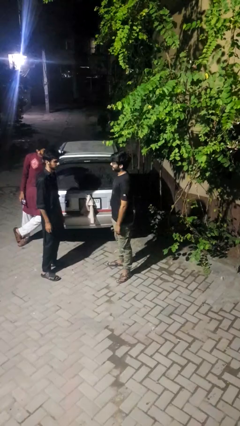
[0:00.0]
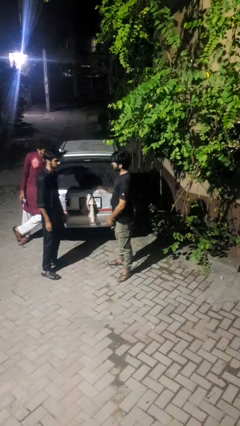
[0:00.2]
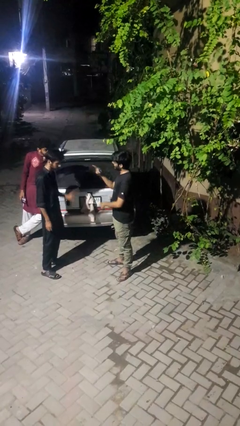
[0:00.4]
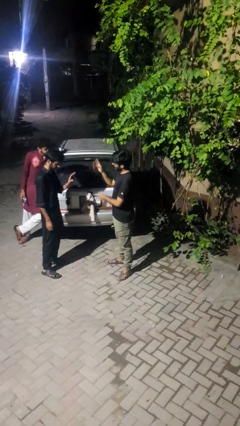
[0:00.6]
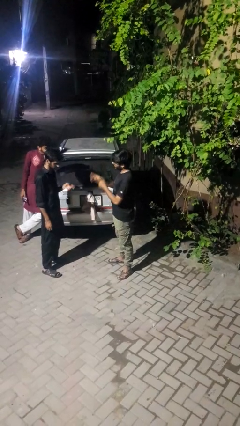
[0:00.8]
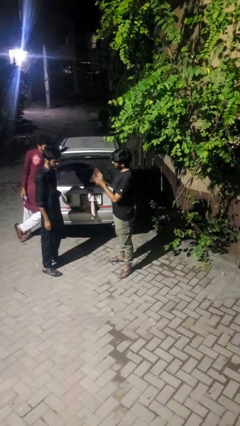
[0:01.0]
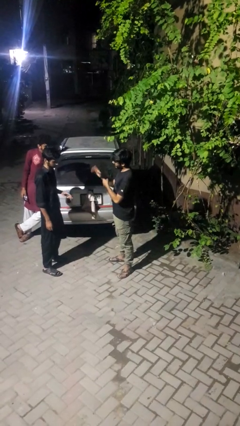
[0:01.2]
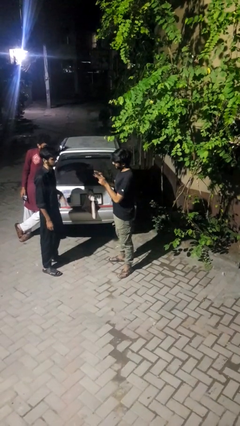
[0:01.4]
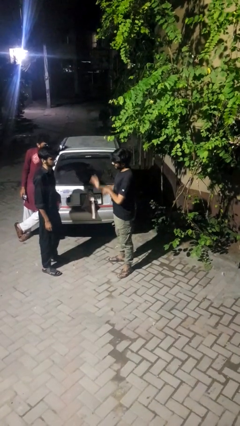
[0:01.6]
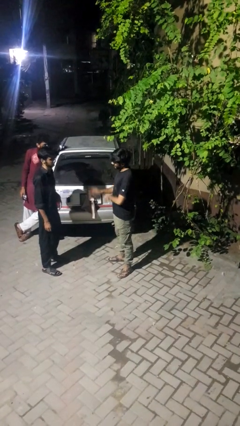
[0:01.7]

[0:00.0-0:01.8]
person talks to person

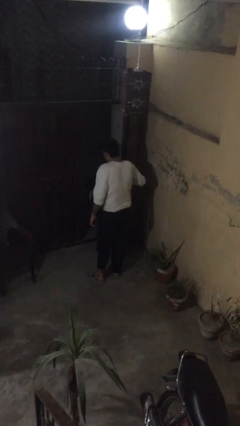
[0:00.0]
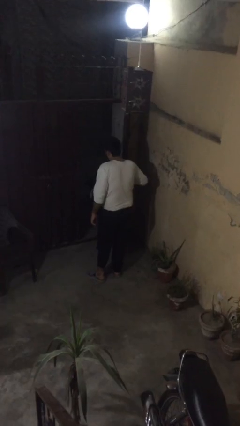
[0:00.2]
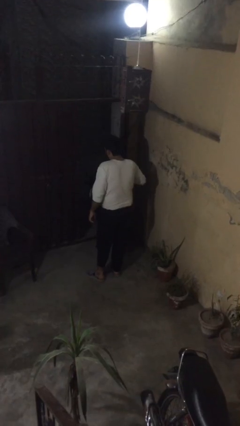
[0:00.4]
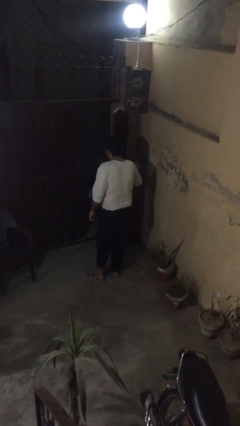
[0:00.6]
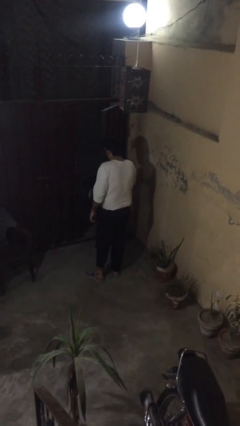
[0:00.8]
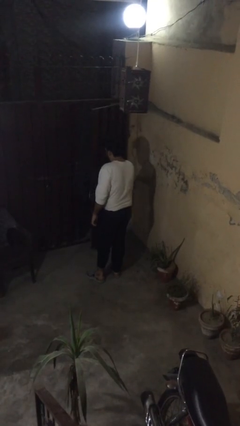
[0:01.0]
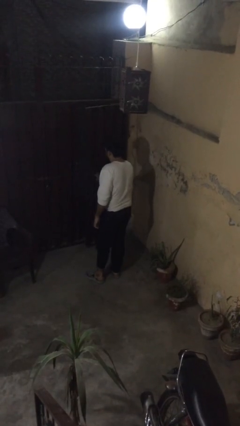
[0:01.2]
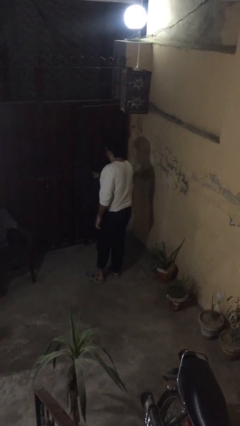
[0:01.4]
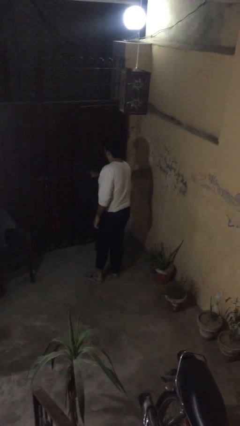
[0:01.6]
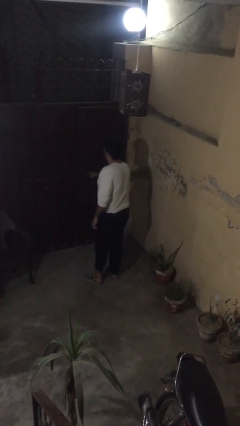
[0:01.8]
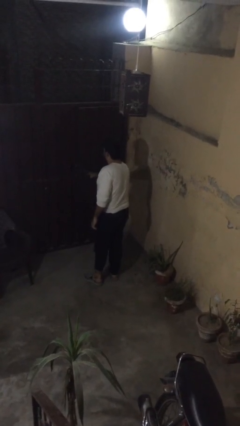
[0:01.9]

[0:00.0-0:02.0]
person closes facility door

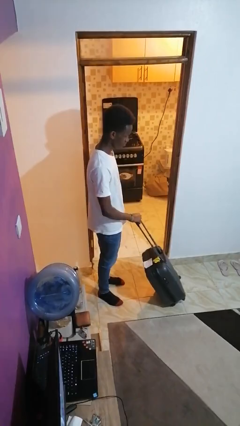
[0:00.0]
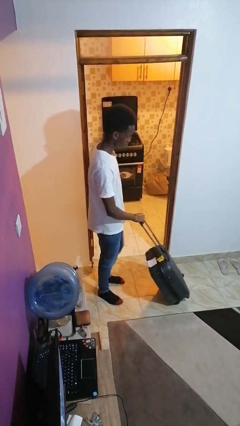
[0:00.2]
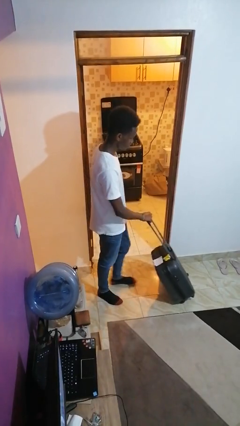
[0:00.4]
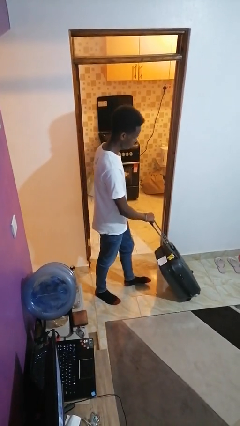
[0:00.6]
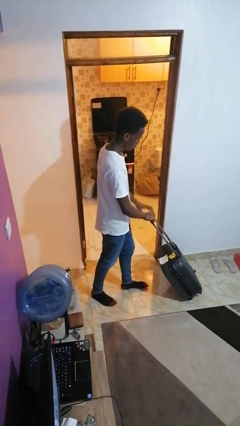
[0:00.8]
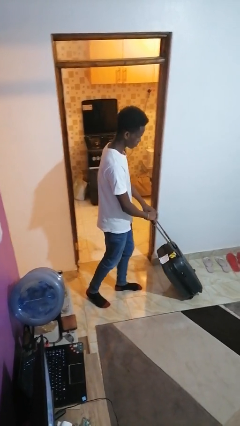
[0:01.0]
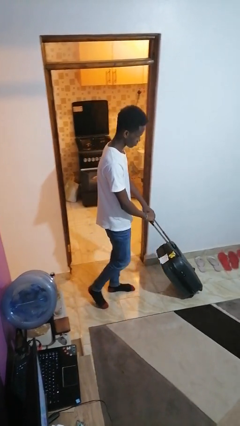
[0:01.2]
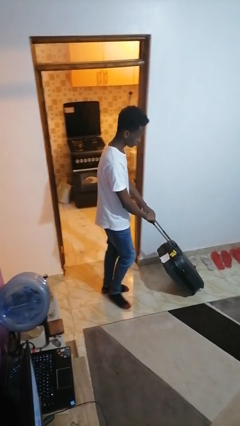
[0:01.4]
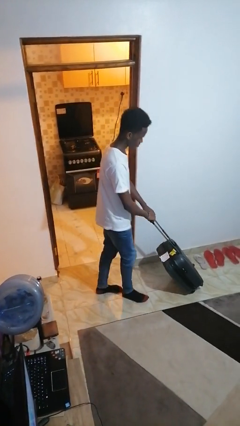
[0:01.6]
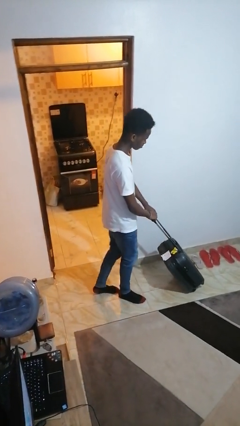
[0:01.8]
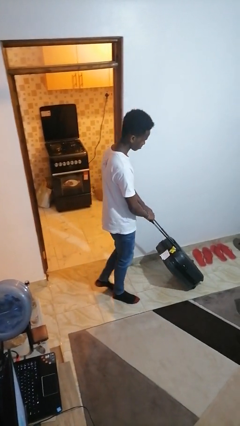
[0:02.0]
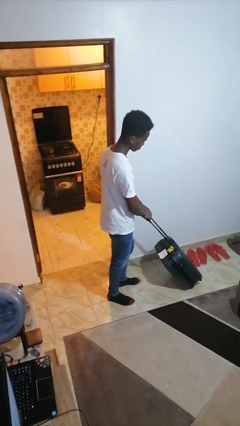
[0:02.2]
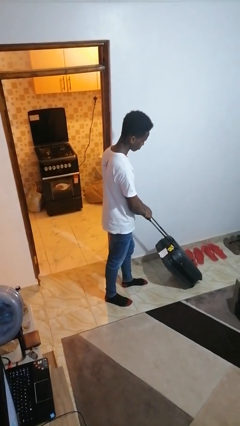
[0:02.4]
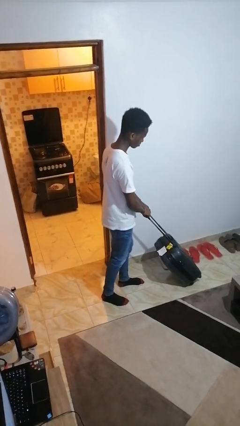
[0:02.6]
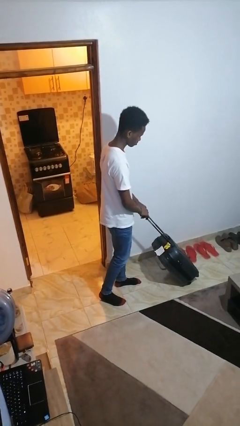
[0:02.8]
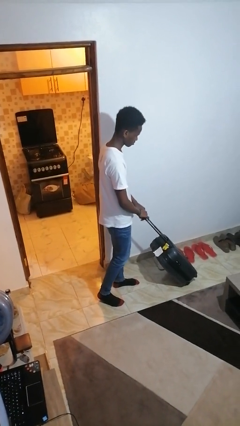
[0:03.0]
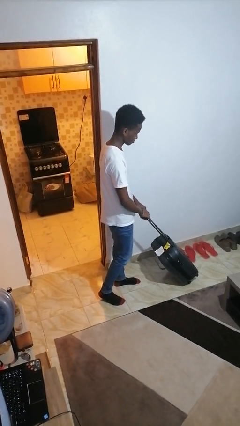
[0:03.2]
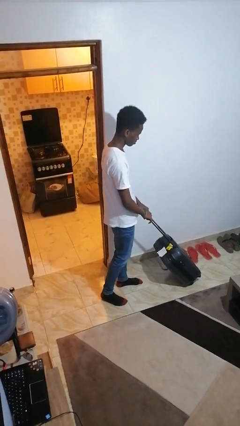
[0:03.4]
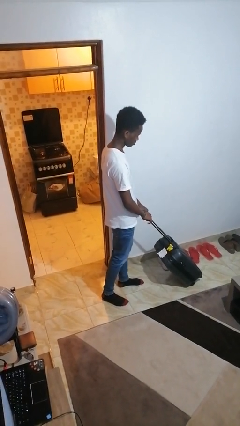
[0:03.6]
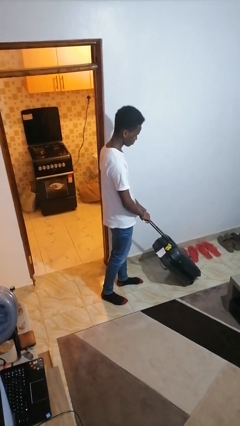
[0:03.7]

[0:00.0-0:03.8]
person pushes wheeled cart

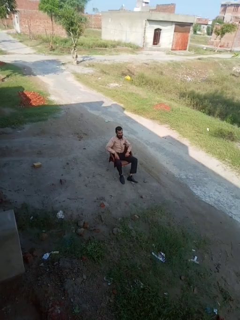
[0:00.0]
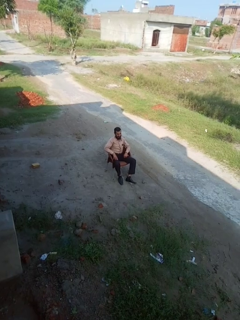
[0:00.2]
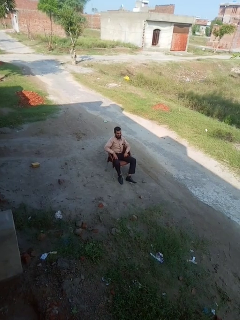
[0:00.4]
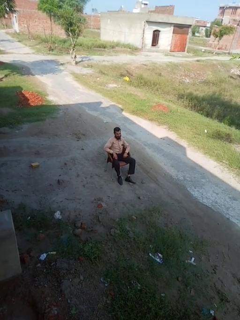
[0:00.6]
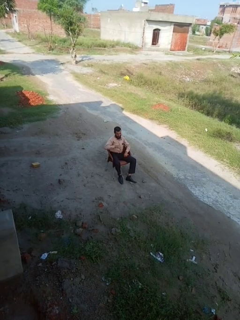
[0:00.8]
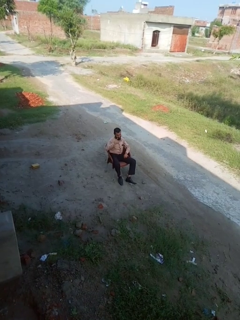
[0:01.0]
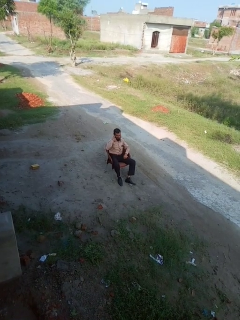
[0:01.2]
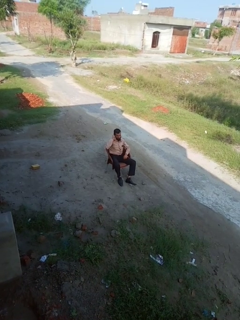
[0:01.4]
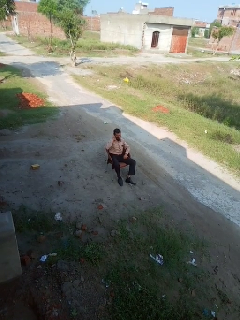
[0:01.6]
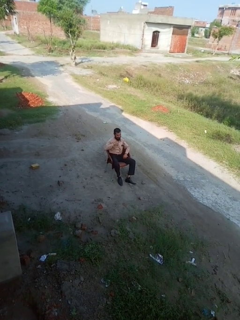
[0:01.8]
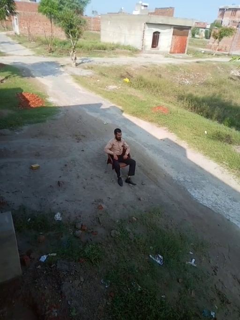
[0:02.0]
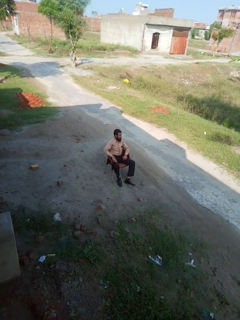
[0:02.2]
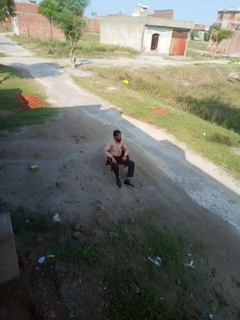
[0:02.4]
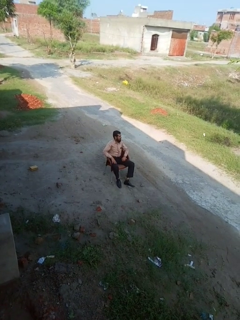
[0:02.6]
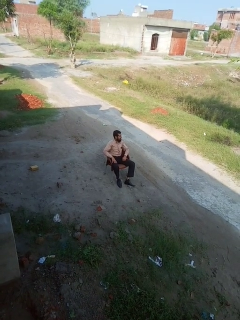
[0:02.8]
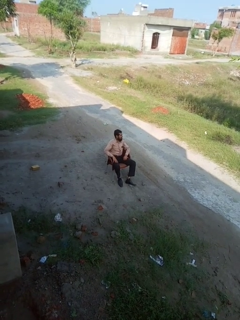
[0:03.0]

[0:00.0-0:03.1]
person gestures call me

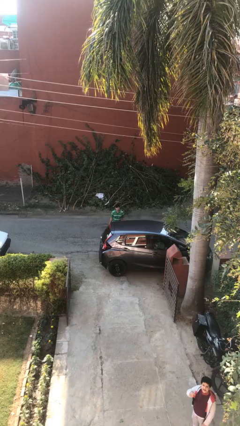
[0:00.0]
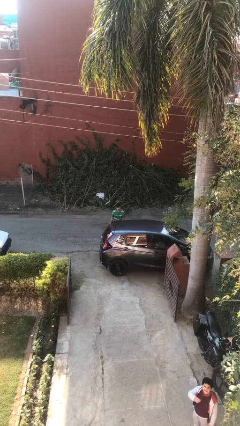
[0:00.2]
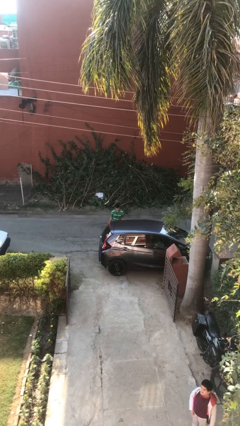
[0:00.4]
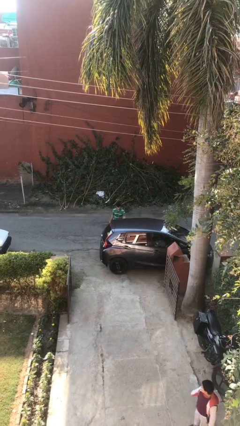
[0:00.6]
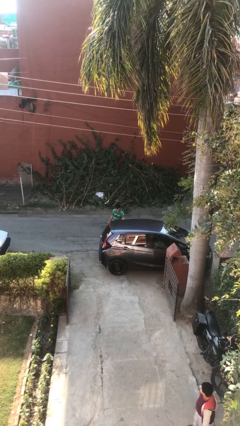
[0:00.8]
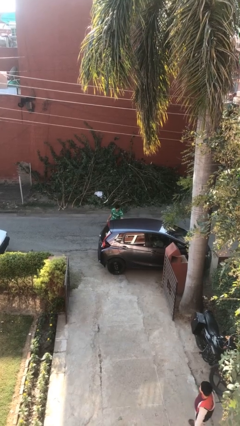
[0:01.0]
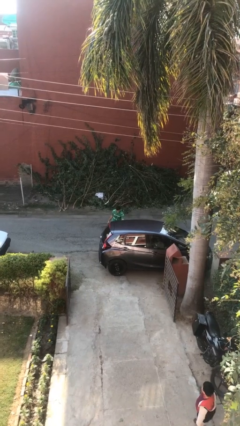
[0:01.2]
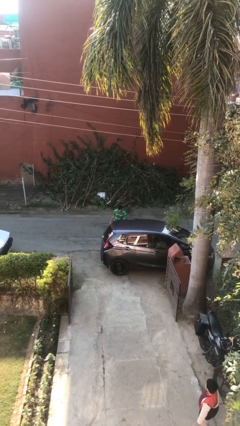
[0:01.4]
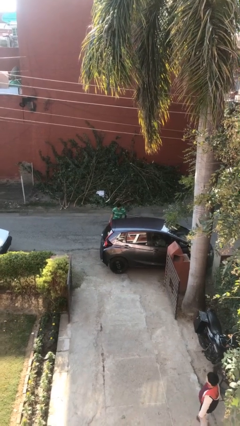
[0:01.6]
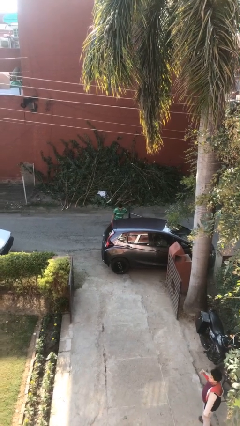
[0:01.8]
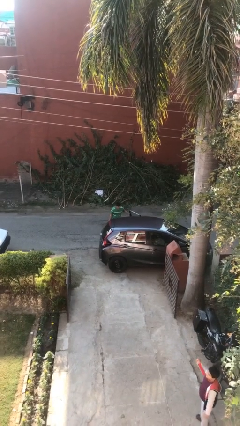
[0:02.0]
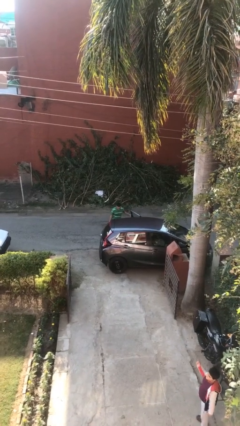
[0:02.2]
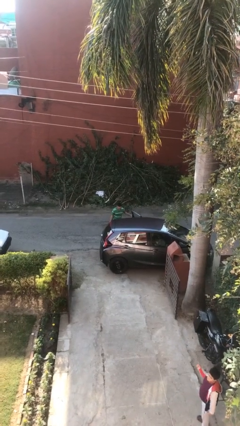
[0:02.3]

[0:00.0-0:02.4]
person opens car door

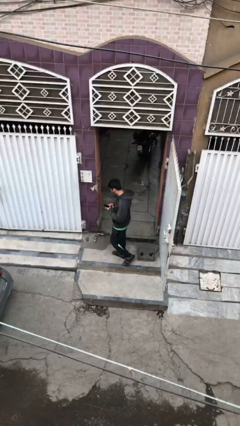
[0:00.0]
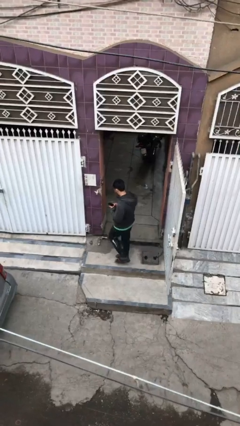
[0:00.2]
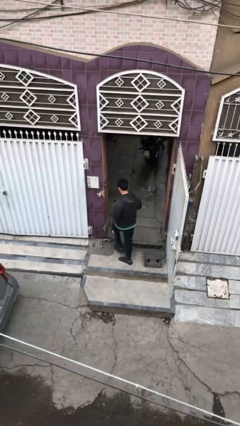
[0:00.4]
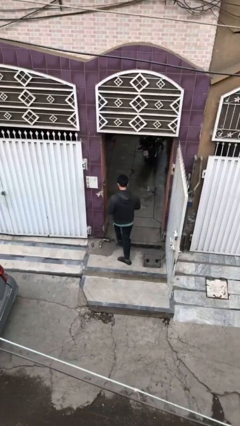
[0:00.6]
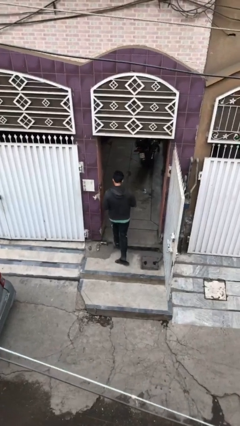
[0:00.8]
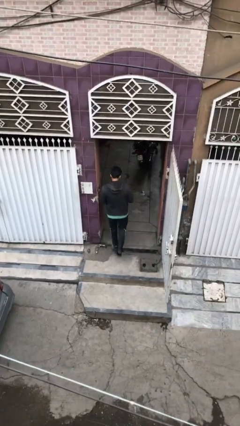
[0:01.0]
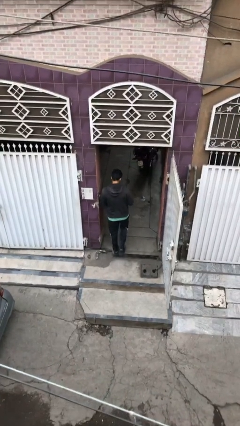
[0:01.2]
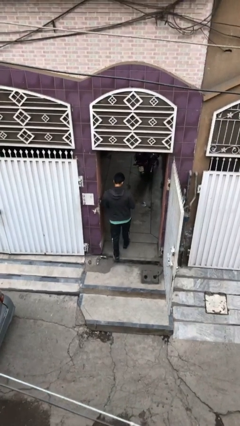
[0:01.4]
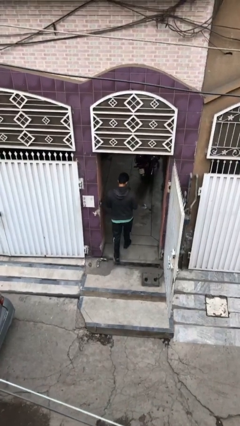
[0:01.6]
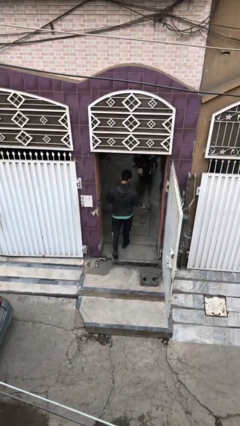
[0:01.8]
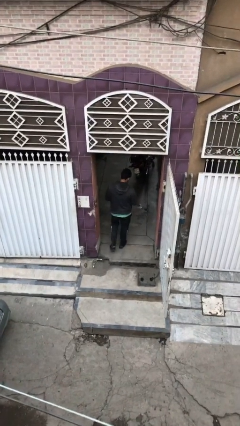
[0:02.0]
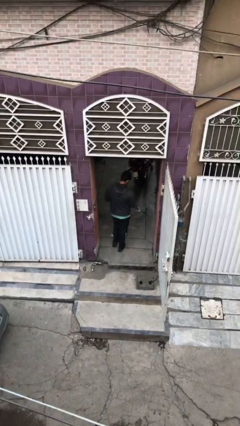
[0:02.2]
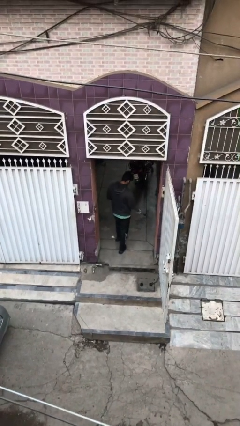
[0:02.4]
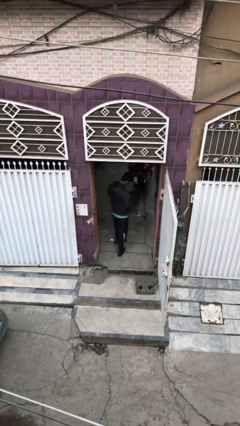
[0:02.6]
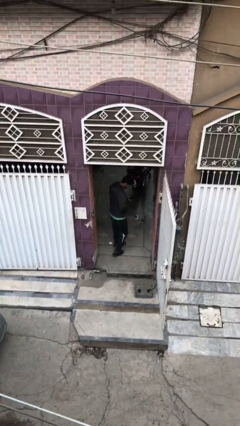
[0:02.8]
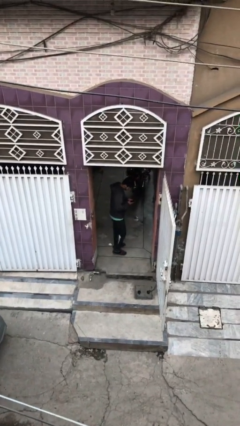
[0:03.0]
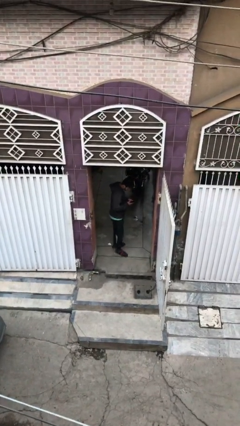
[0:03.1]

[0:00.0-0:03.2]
person exits scene through structure

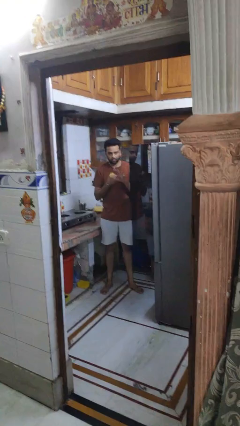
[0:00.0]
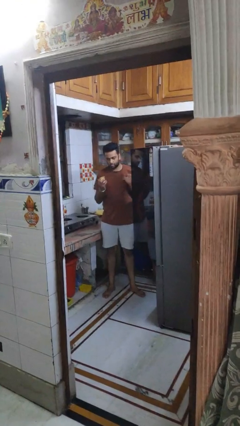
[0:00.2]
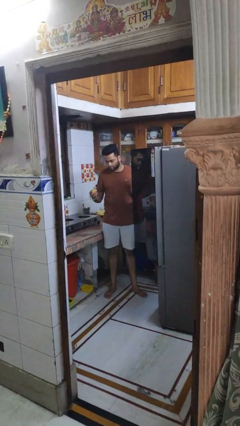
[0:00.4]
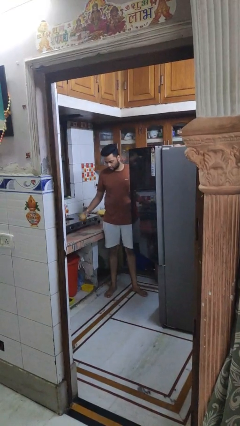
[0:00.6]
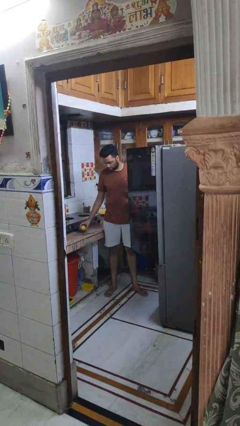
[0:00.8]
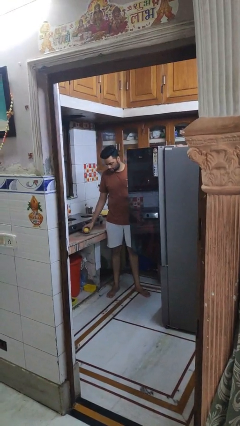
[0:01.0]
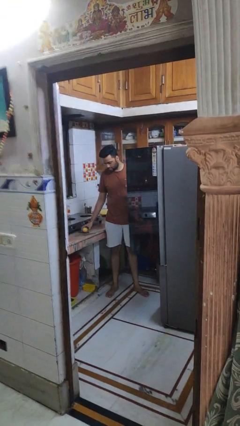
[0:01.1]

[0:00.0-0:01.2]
person takes object from refrigerator

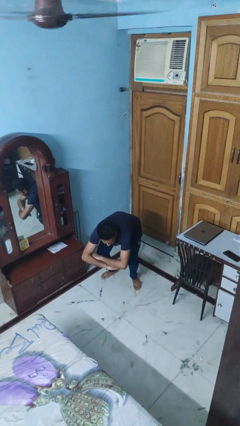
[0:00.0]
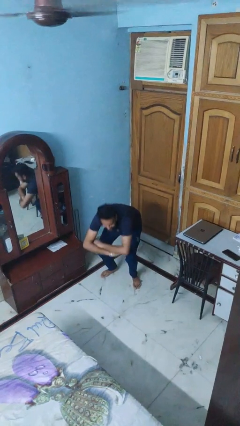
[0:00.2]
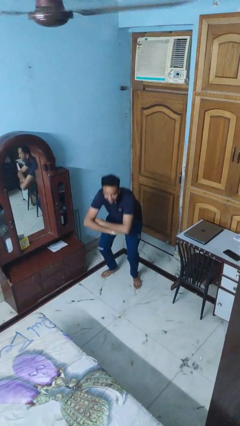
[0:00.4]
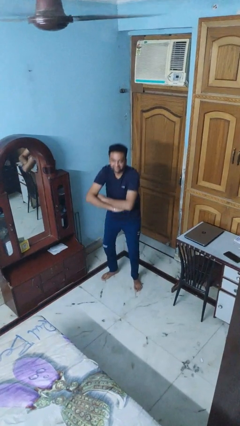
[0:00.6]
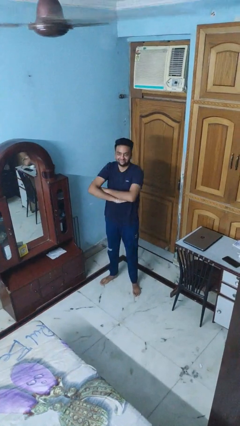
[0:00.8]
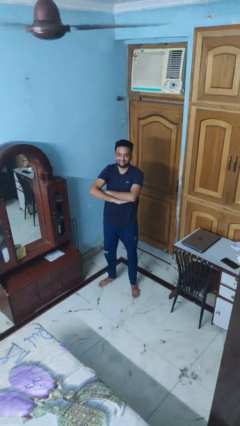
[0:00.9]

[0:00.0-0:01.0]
person stands up
